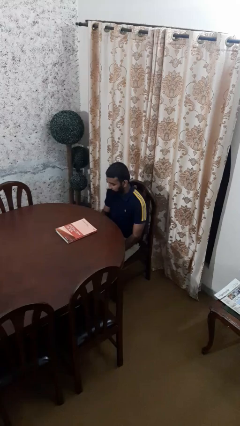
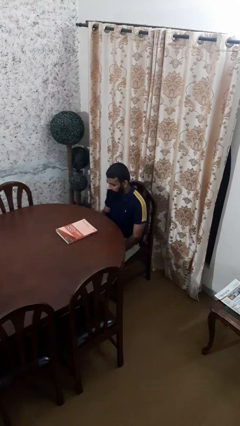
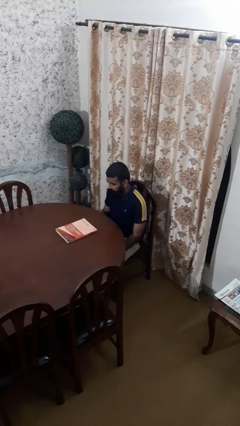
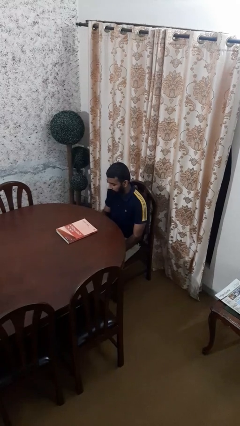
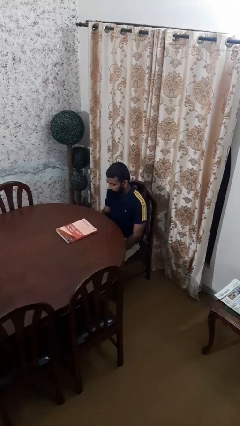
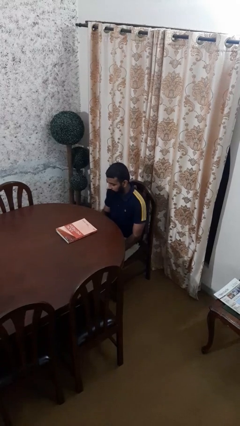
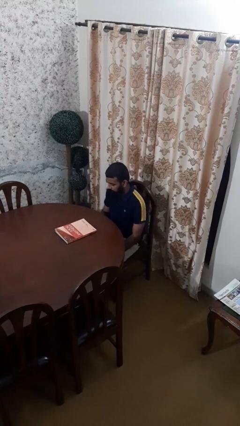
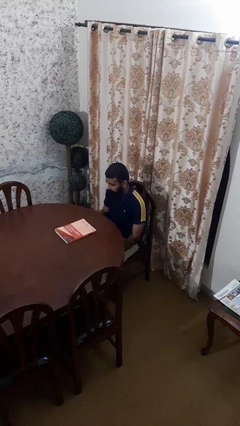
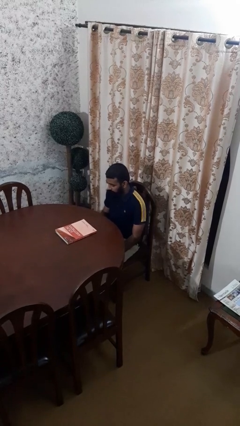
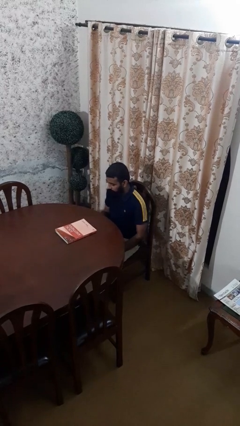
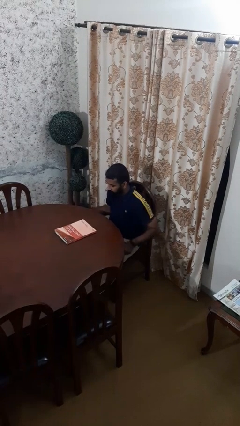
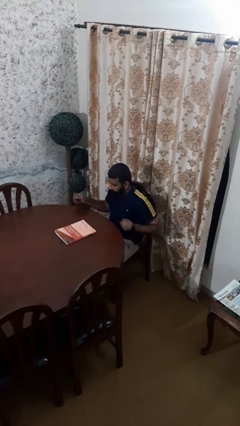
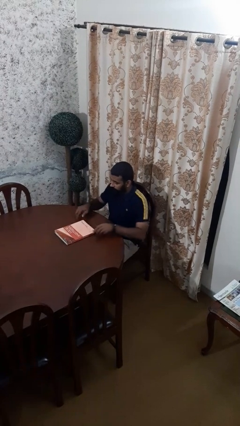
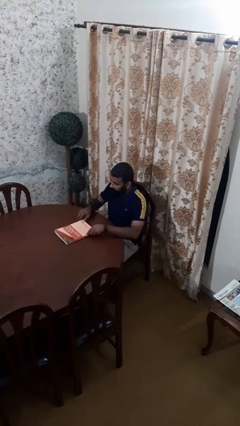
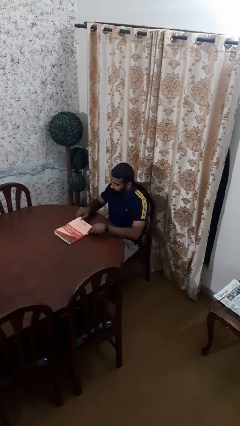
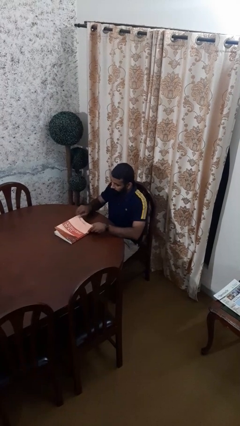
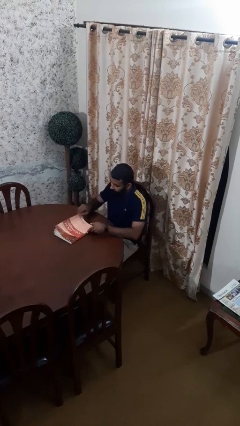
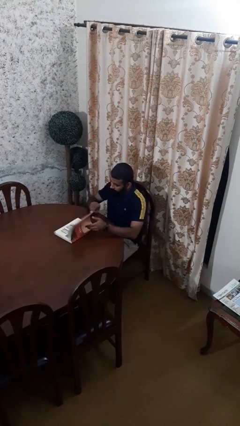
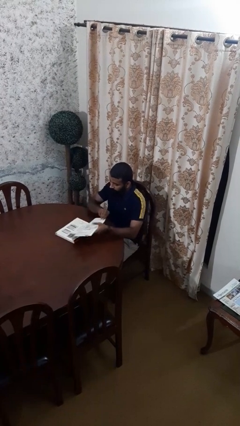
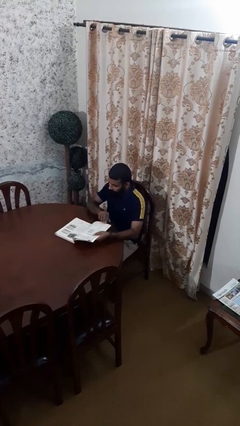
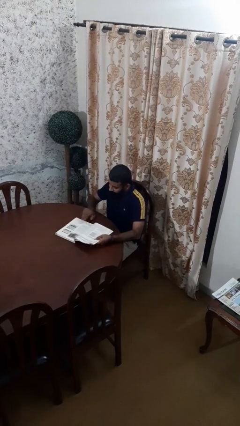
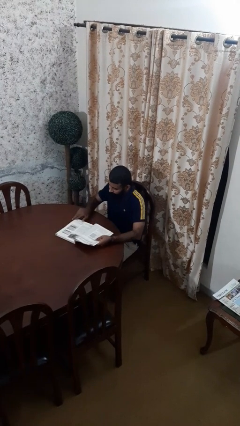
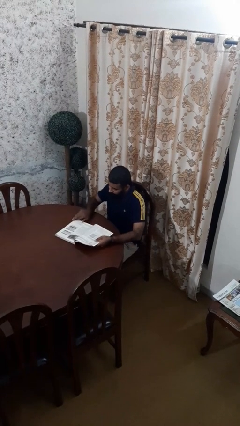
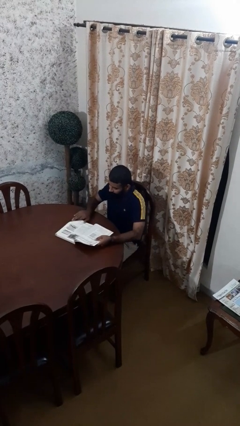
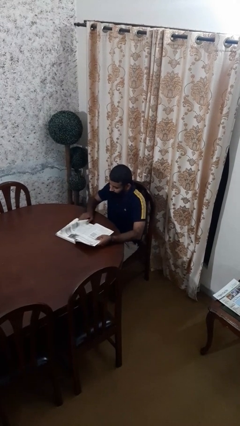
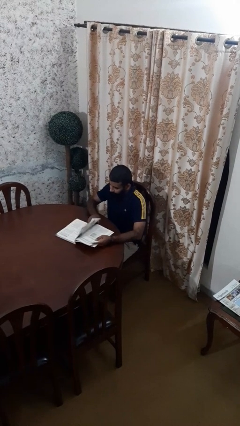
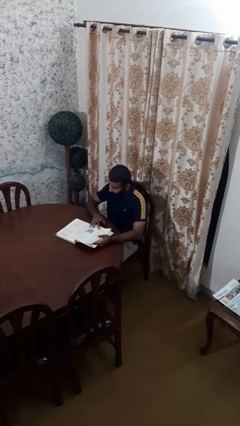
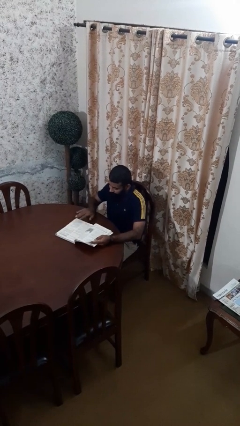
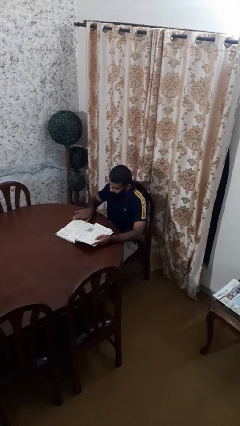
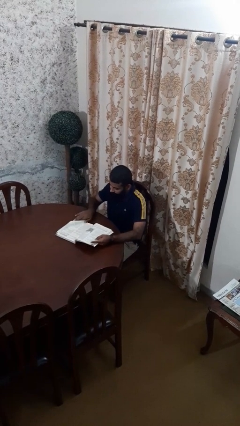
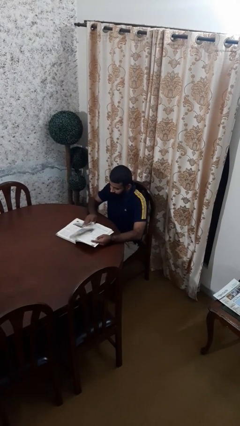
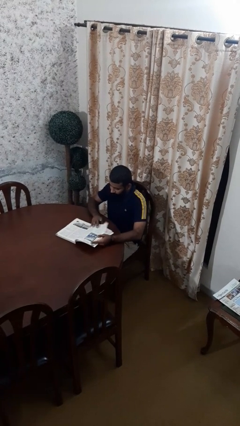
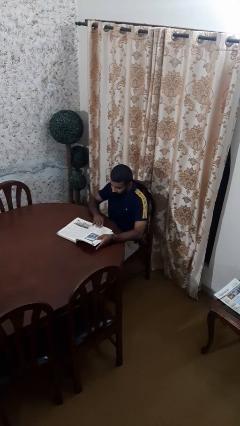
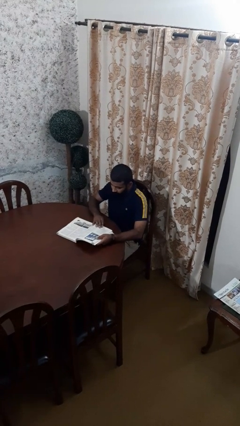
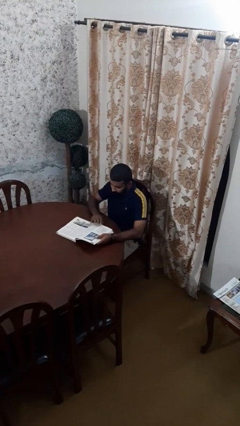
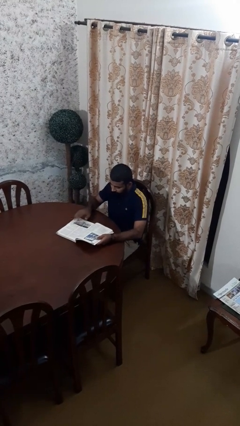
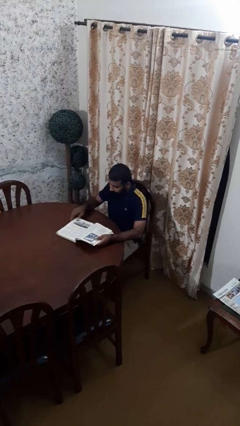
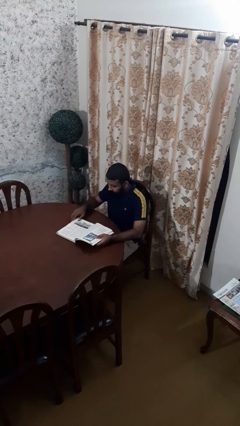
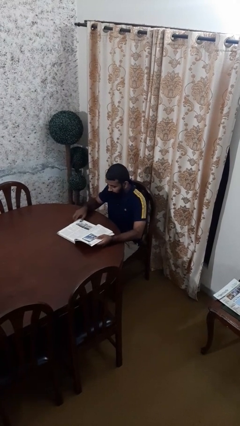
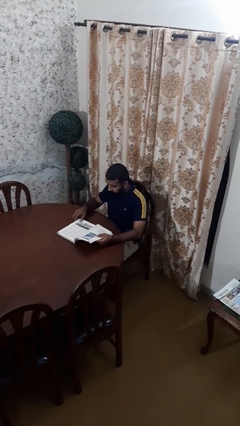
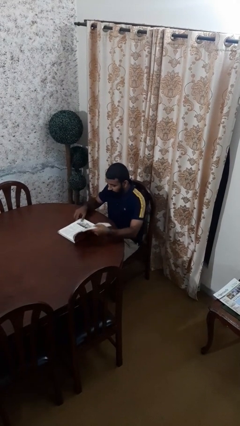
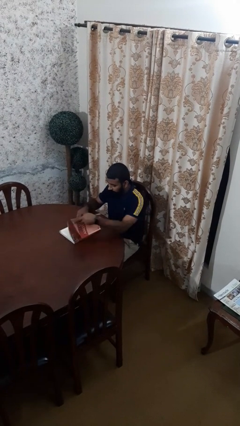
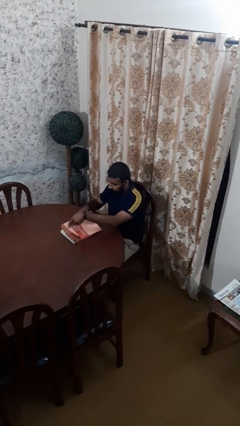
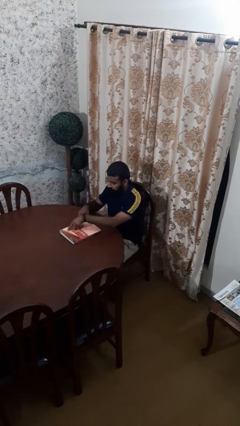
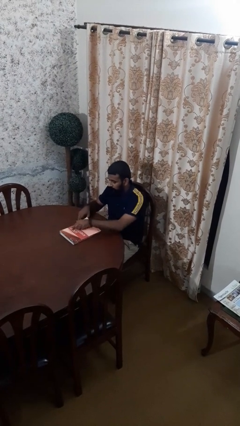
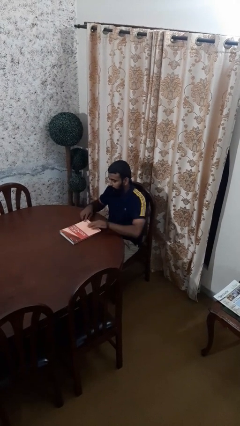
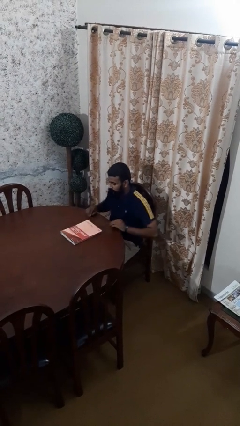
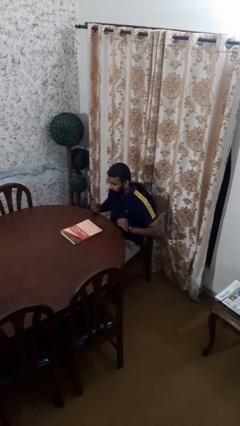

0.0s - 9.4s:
person reads book

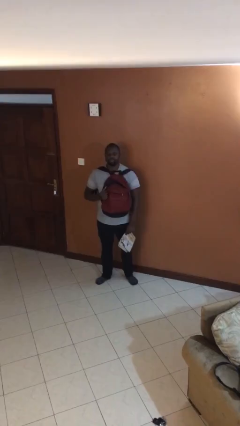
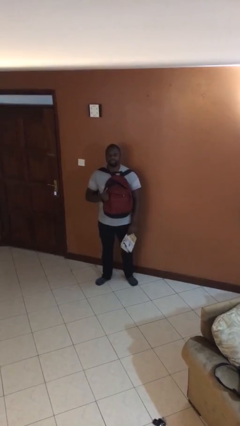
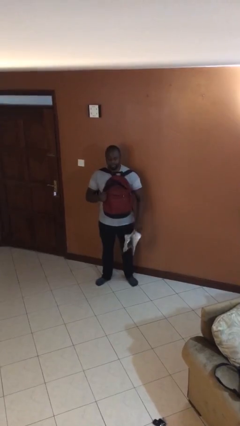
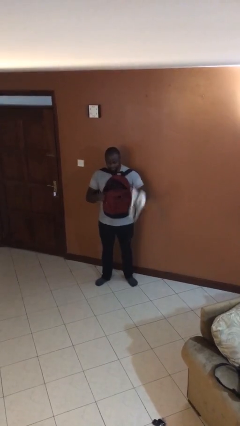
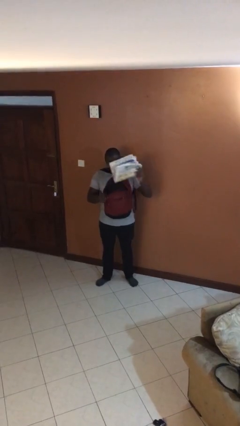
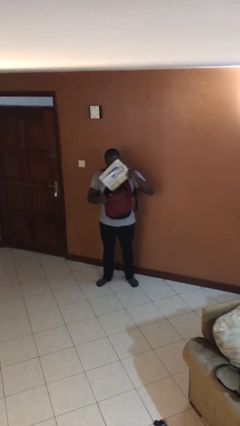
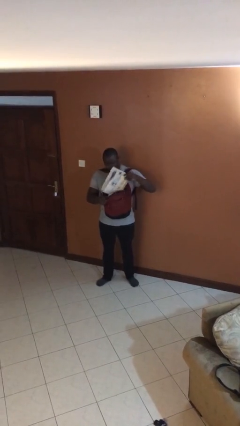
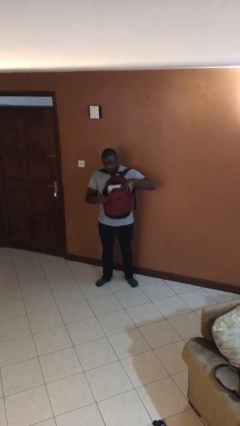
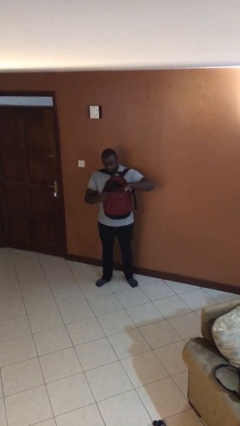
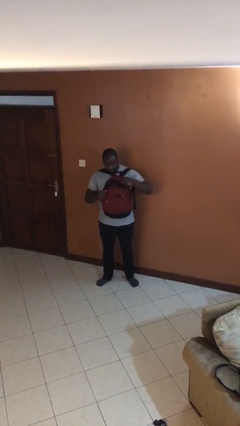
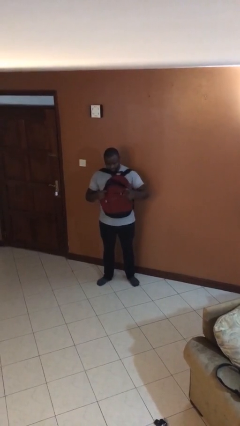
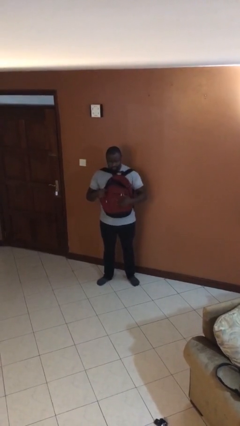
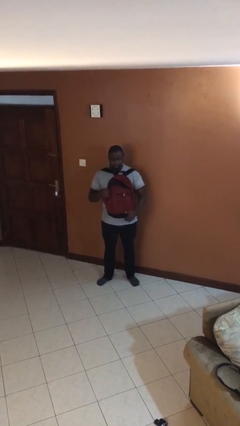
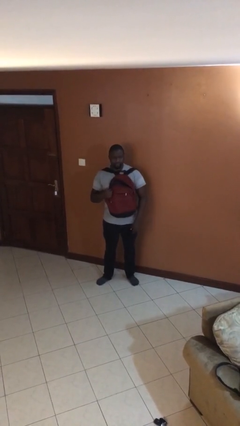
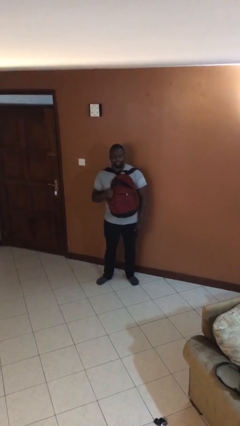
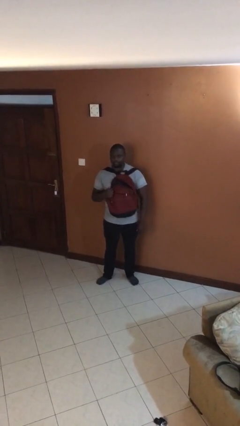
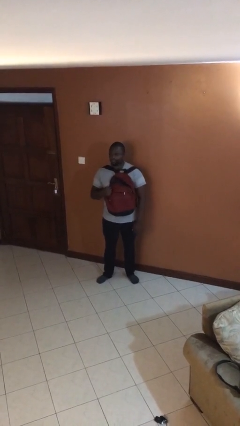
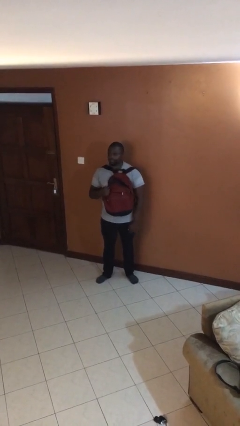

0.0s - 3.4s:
person puts object into backpack

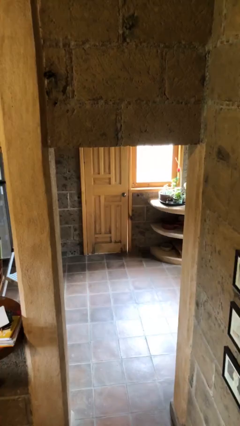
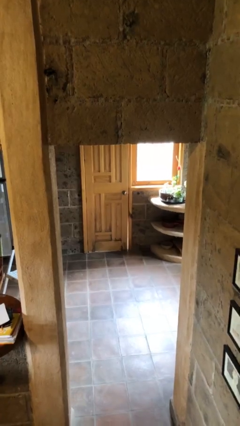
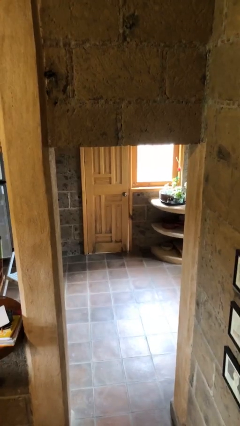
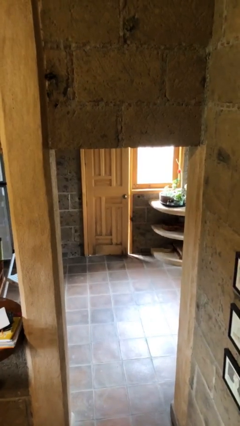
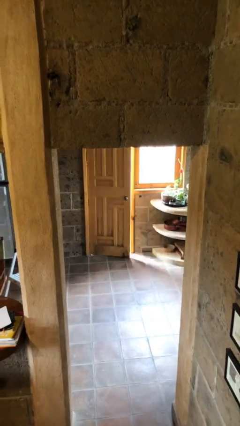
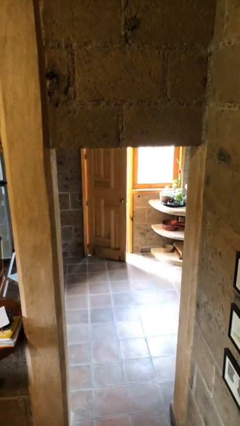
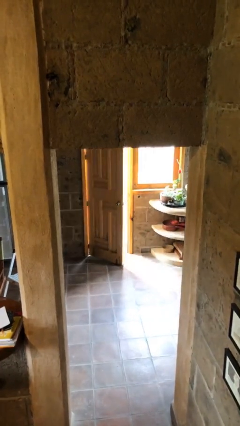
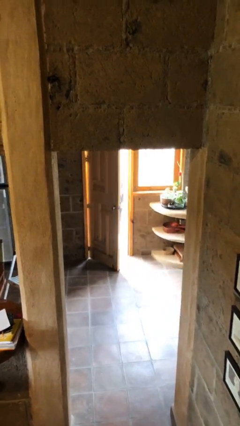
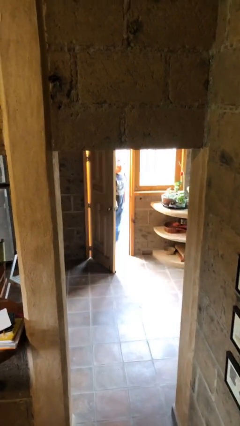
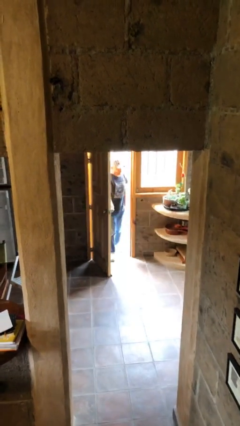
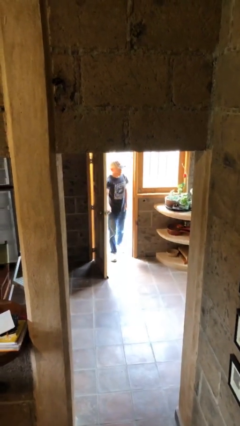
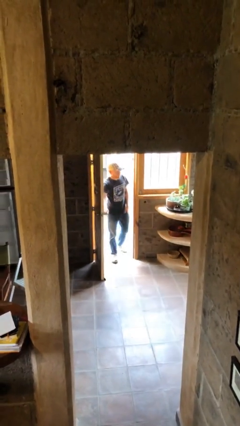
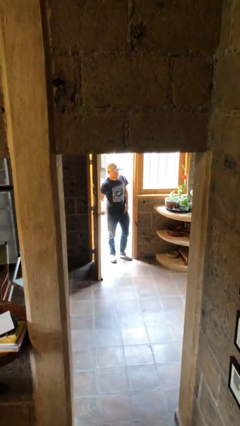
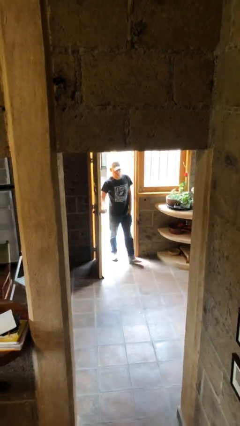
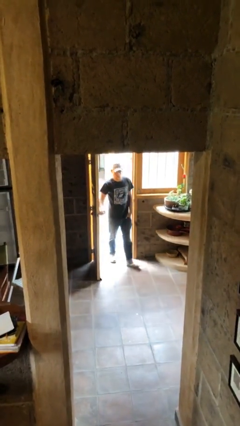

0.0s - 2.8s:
person opens facility door

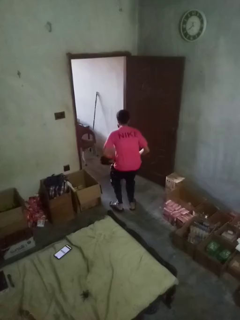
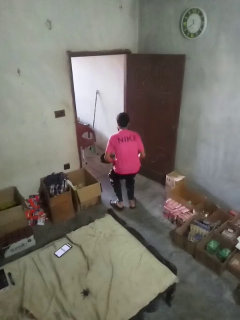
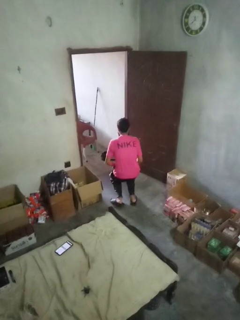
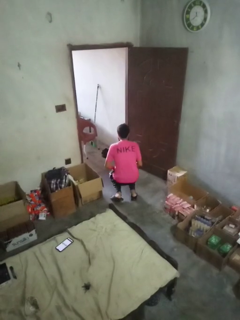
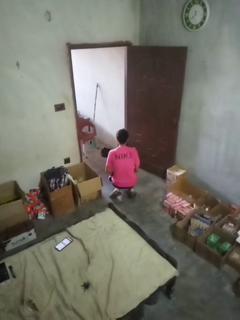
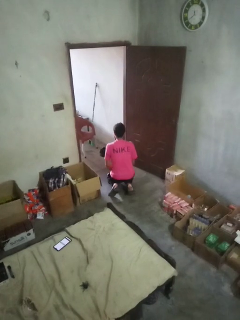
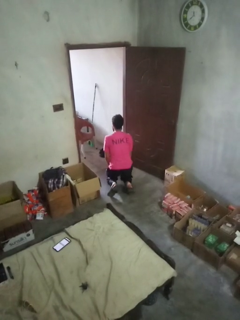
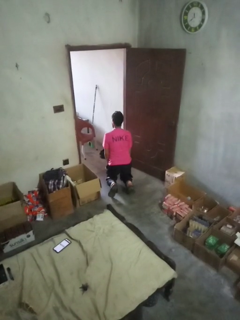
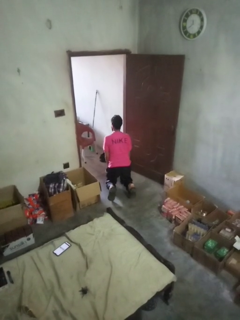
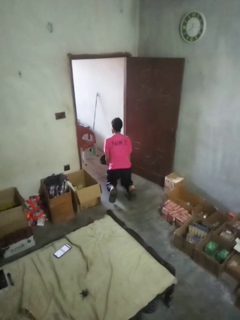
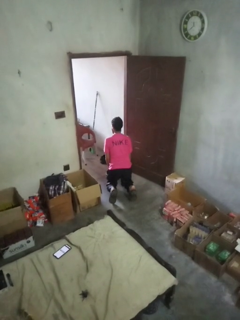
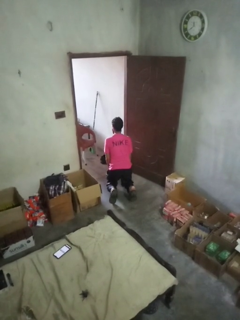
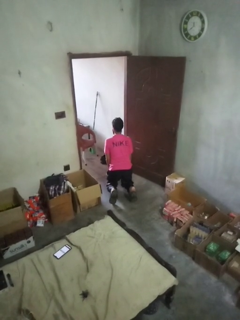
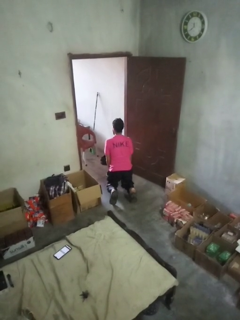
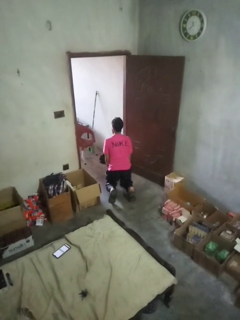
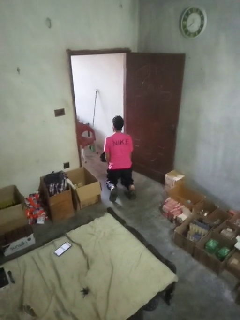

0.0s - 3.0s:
person kneels
